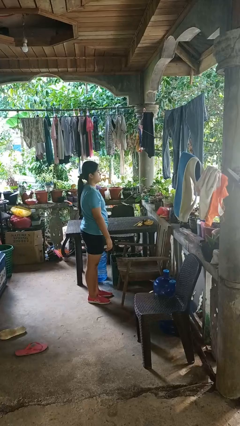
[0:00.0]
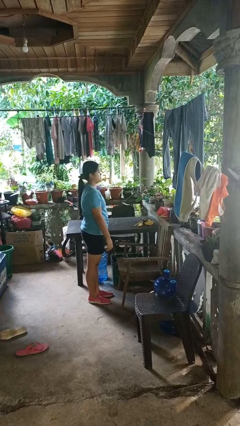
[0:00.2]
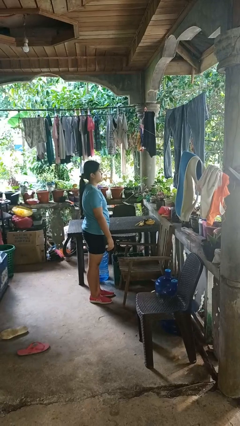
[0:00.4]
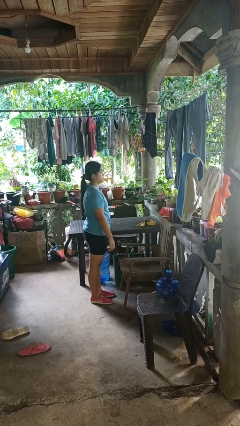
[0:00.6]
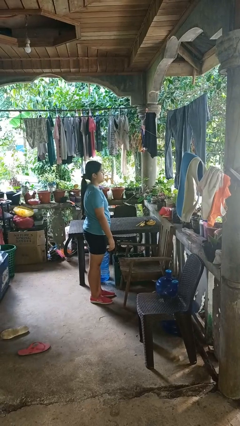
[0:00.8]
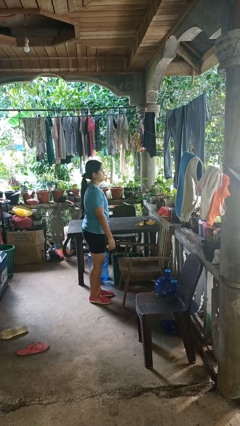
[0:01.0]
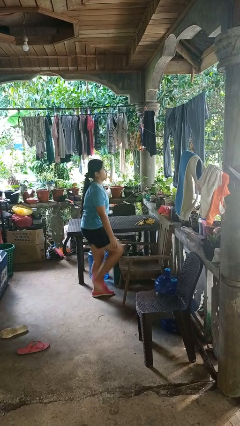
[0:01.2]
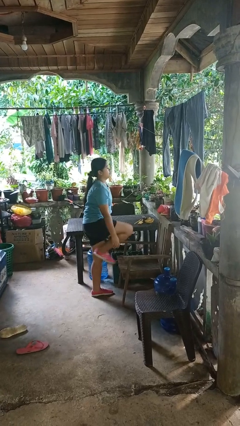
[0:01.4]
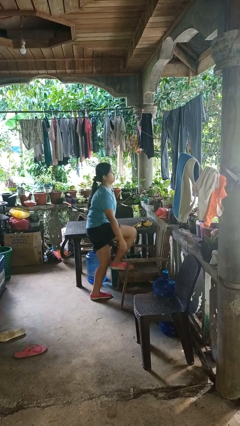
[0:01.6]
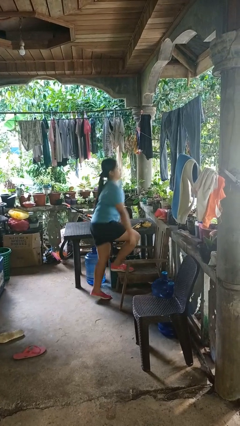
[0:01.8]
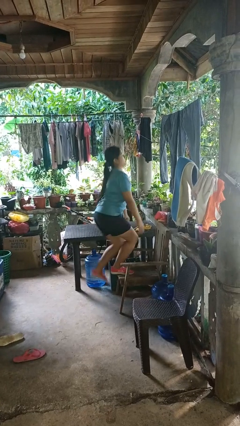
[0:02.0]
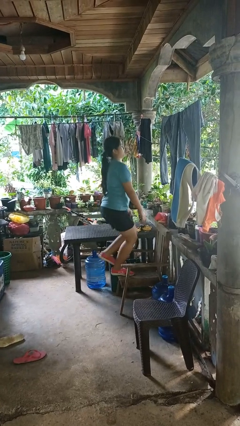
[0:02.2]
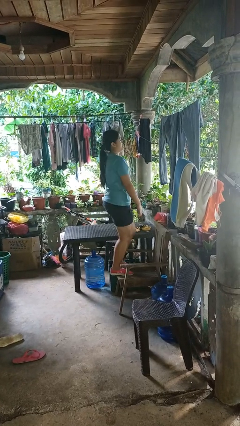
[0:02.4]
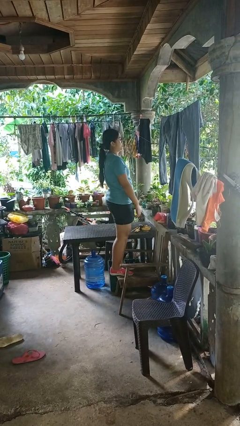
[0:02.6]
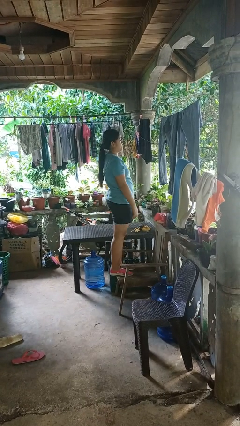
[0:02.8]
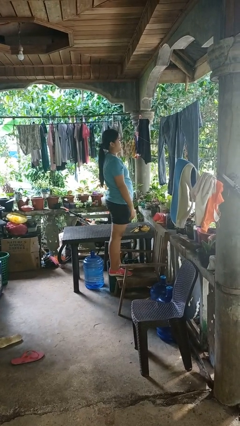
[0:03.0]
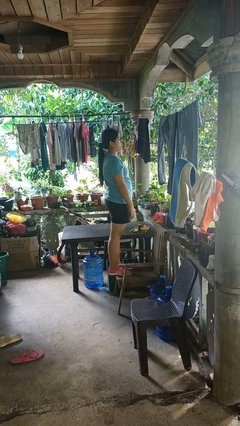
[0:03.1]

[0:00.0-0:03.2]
person climbs on chair

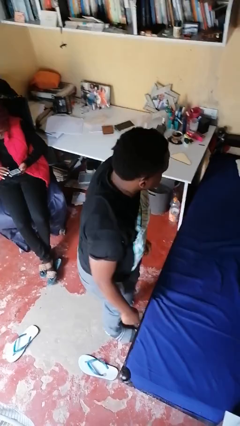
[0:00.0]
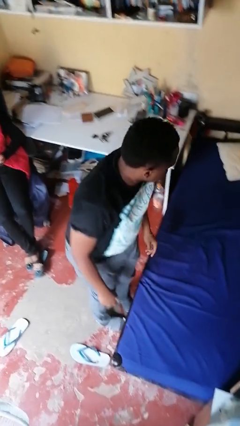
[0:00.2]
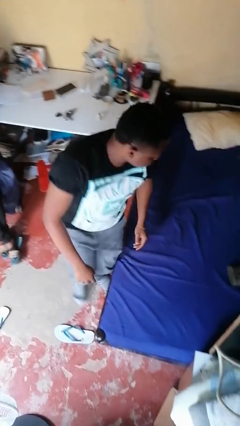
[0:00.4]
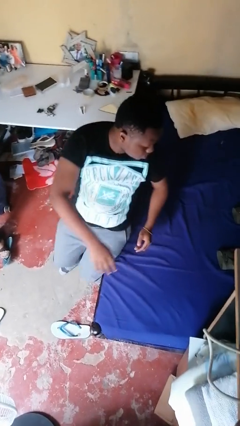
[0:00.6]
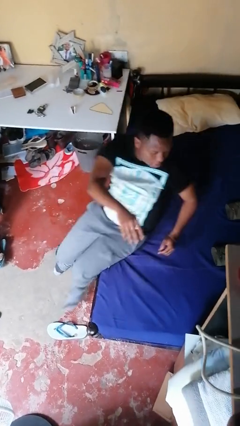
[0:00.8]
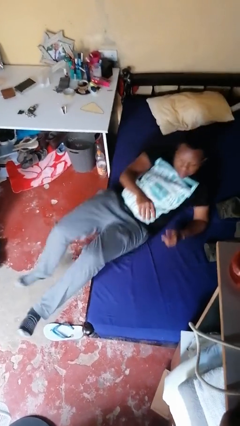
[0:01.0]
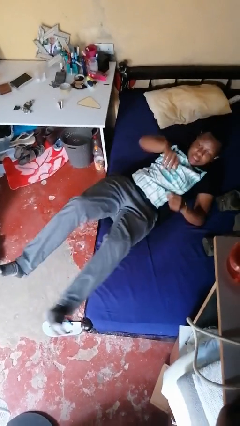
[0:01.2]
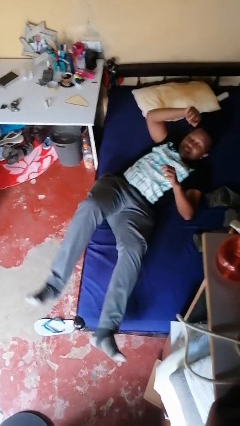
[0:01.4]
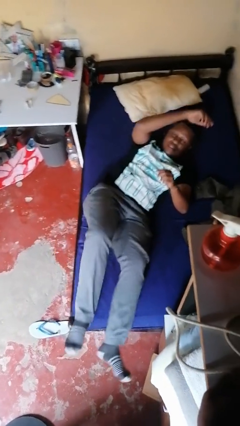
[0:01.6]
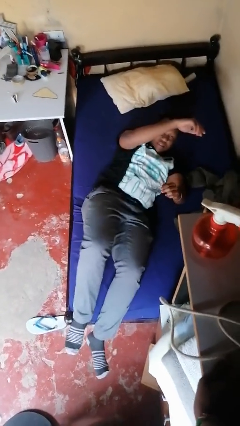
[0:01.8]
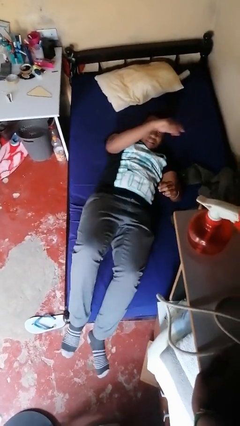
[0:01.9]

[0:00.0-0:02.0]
person lies down on bed

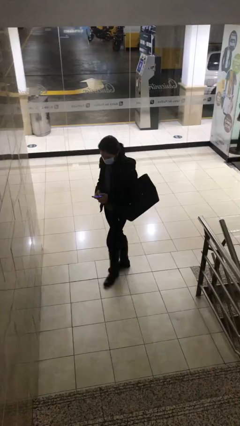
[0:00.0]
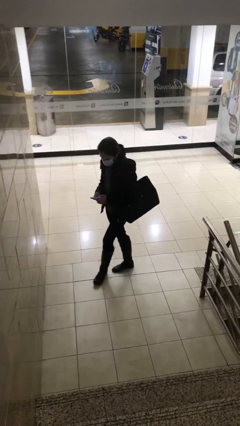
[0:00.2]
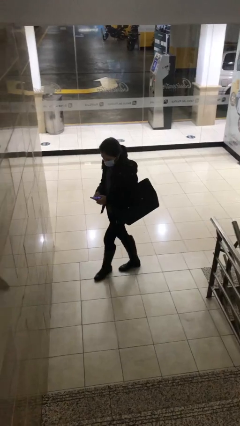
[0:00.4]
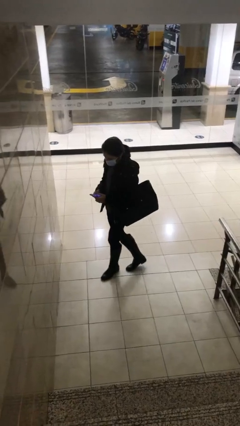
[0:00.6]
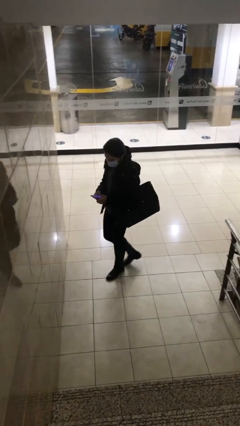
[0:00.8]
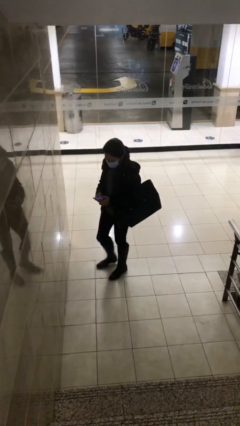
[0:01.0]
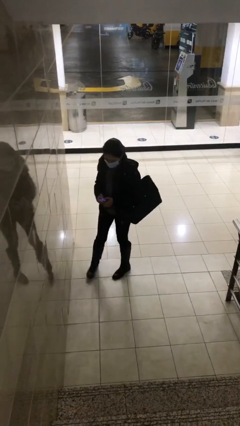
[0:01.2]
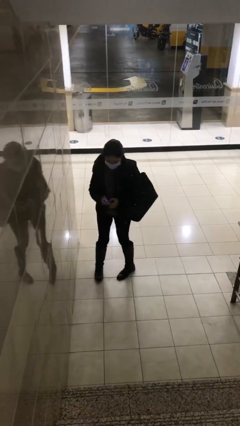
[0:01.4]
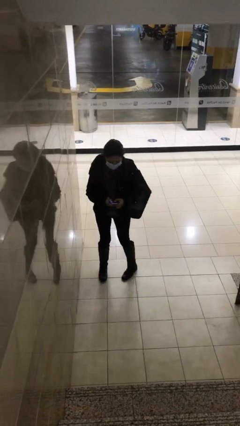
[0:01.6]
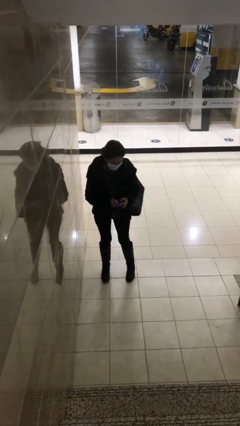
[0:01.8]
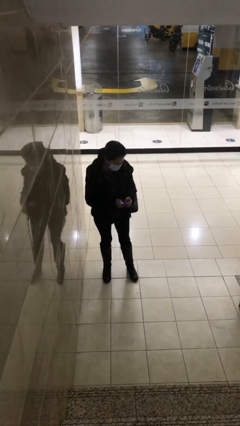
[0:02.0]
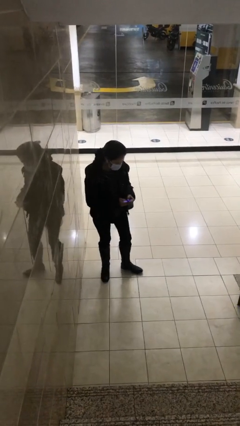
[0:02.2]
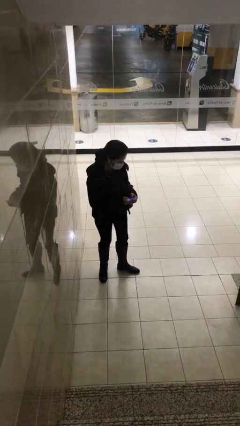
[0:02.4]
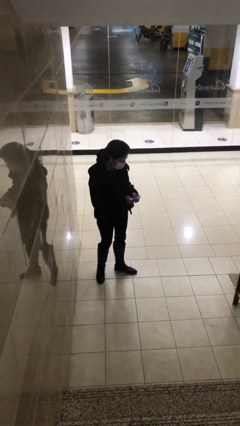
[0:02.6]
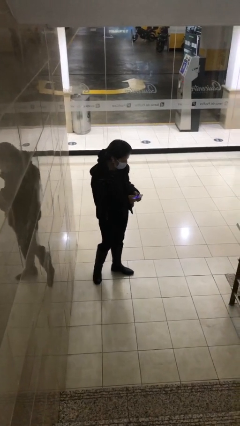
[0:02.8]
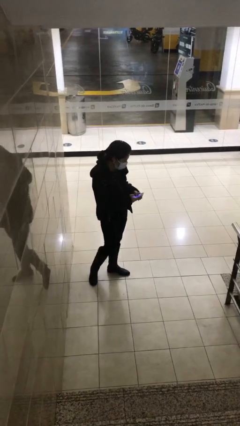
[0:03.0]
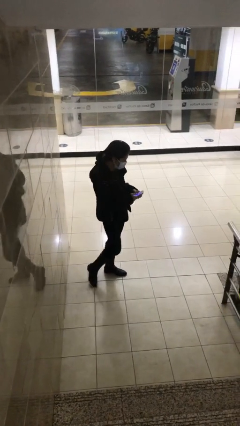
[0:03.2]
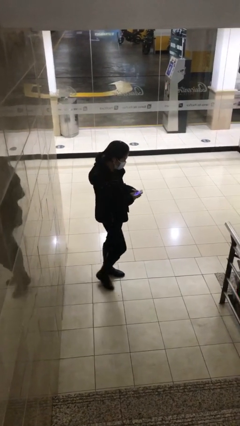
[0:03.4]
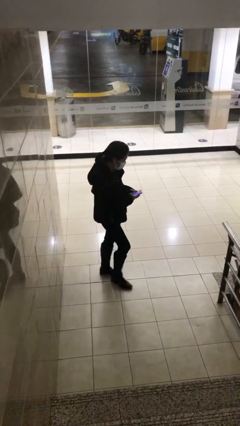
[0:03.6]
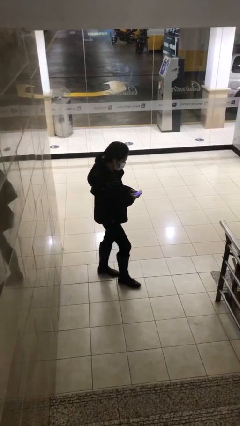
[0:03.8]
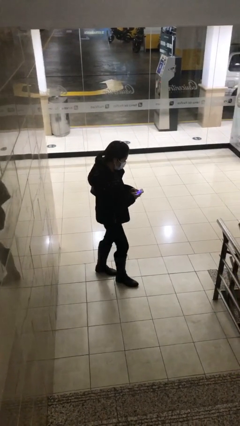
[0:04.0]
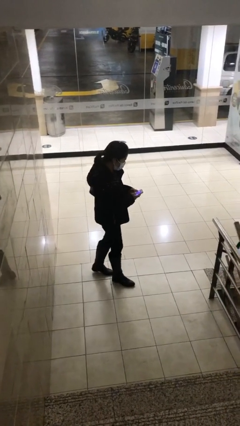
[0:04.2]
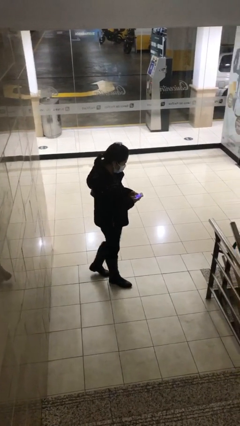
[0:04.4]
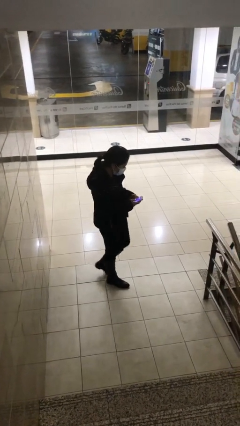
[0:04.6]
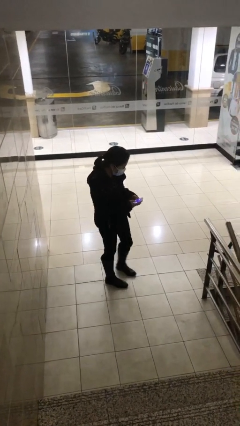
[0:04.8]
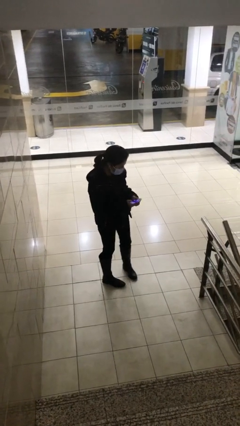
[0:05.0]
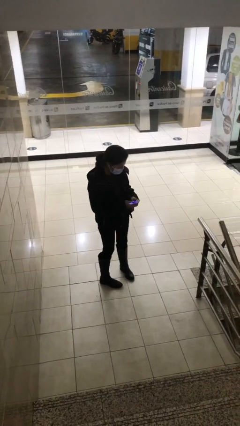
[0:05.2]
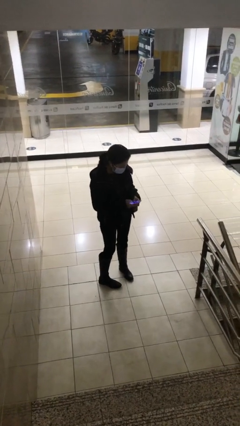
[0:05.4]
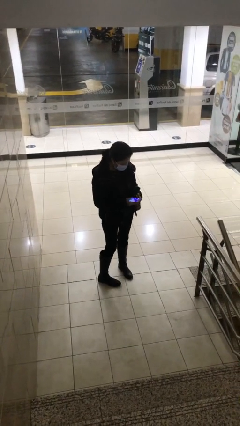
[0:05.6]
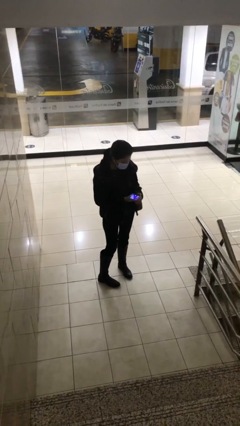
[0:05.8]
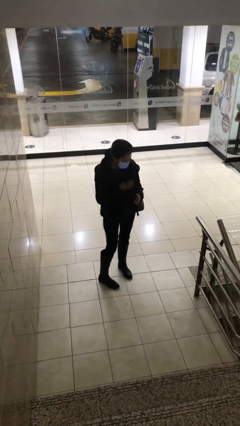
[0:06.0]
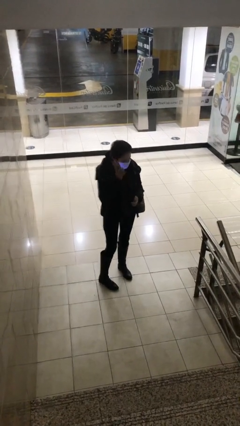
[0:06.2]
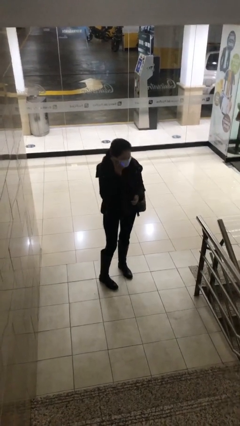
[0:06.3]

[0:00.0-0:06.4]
person texts on phone

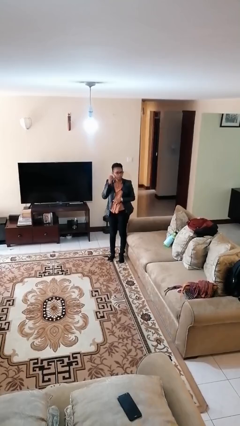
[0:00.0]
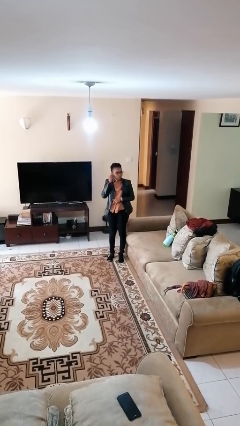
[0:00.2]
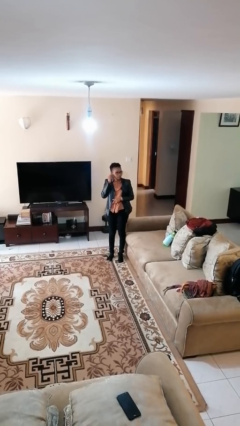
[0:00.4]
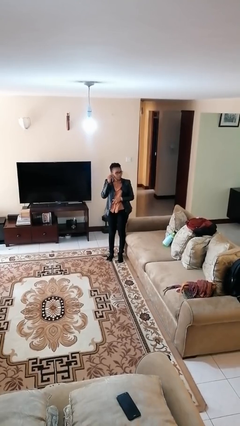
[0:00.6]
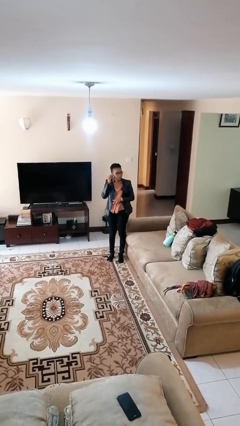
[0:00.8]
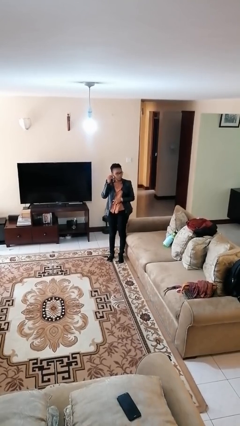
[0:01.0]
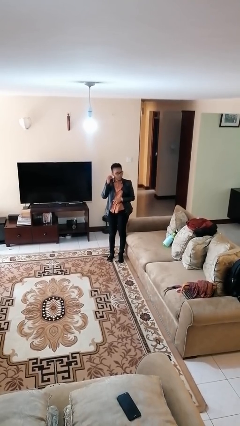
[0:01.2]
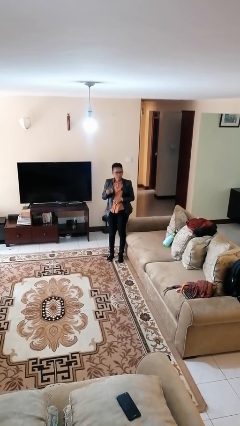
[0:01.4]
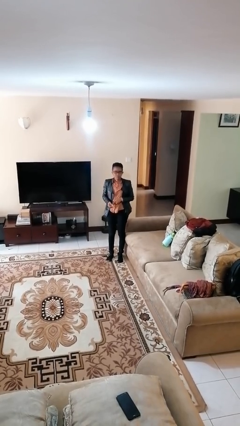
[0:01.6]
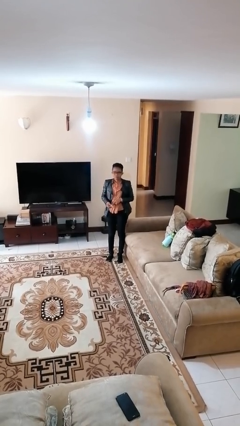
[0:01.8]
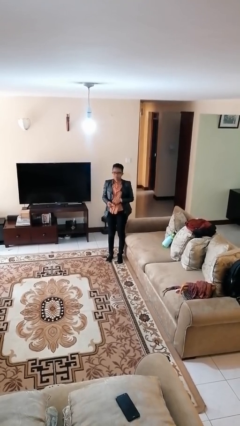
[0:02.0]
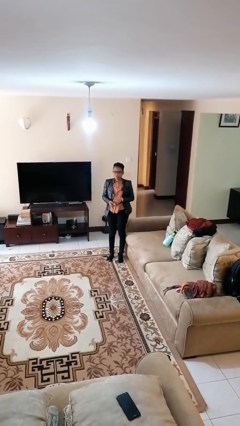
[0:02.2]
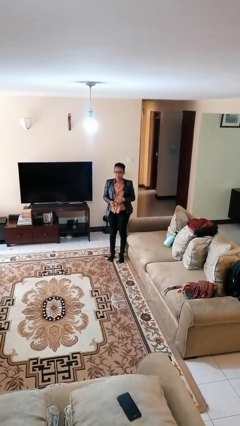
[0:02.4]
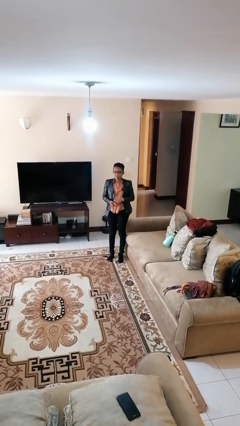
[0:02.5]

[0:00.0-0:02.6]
person takes off earrings

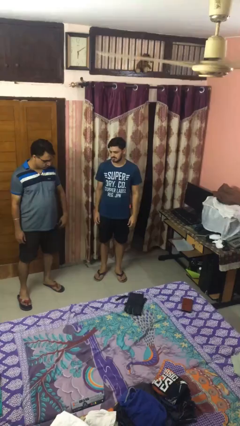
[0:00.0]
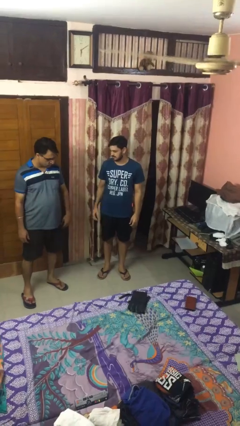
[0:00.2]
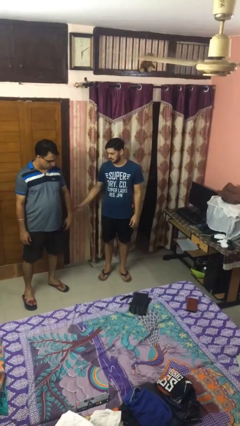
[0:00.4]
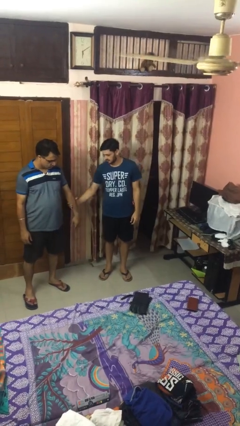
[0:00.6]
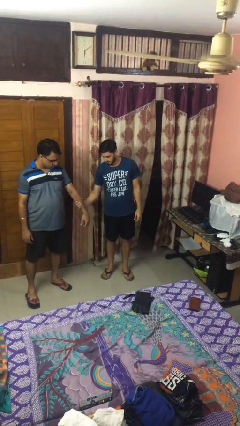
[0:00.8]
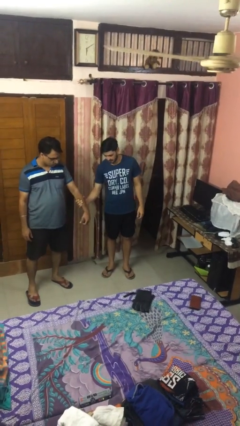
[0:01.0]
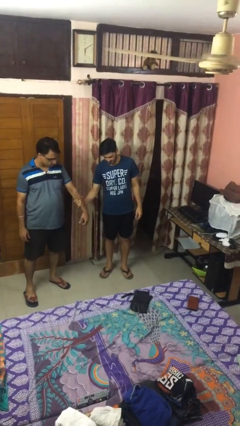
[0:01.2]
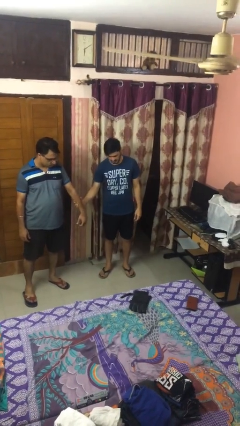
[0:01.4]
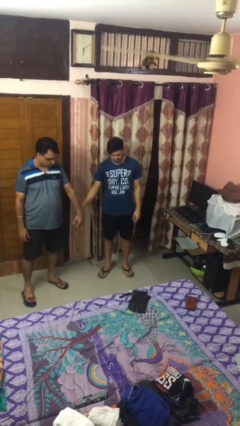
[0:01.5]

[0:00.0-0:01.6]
person grabs person by forearm

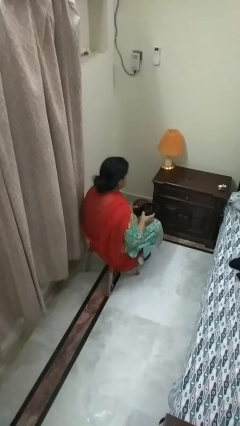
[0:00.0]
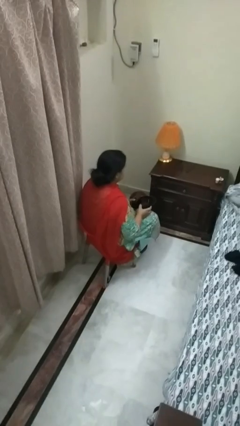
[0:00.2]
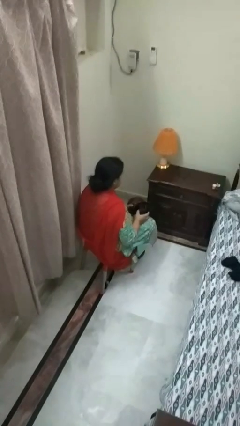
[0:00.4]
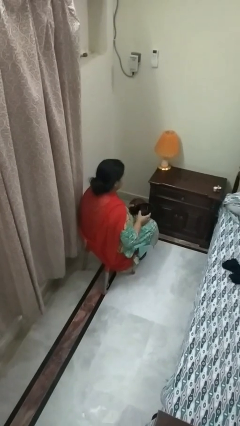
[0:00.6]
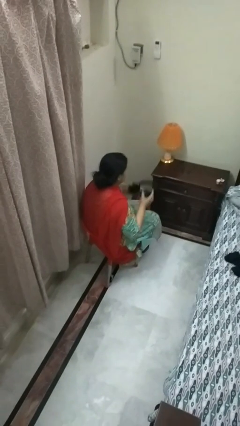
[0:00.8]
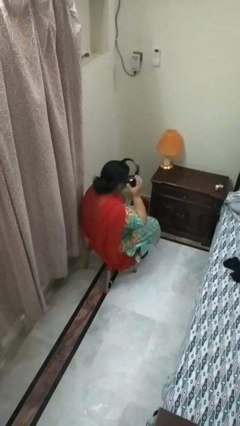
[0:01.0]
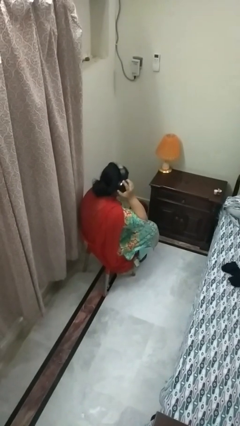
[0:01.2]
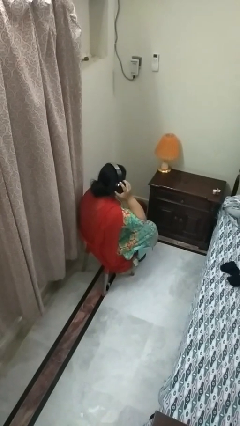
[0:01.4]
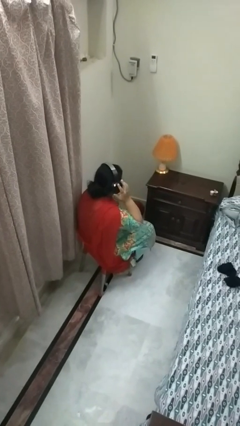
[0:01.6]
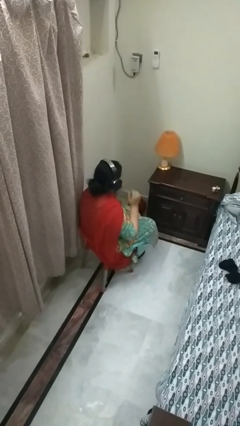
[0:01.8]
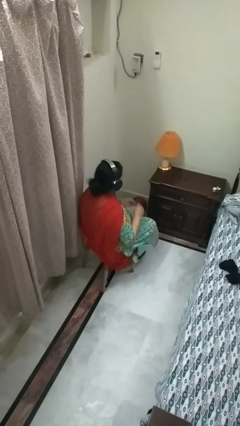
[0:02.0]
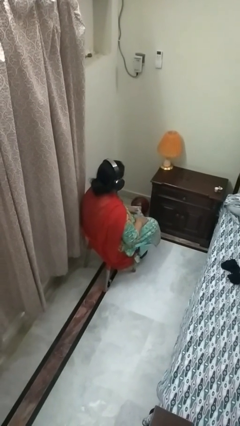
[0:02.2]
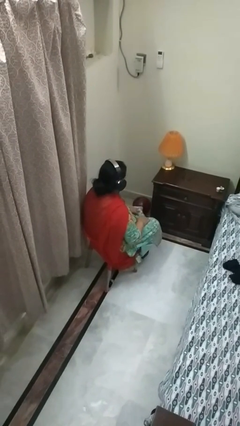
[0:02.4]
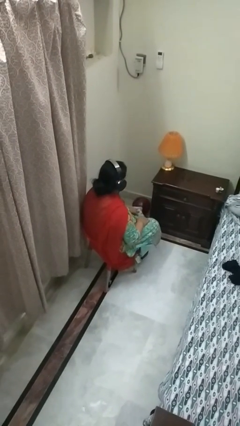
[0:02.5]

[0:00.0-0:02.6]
person puts on headphones
